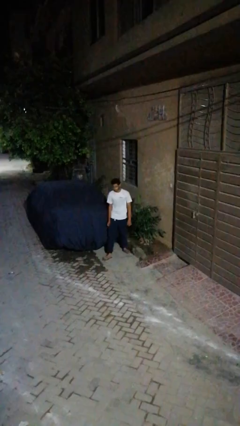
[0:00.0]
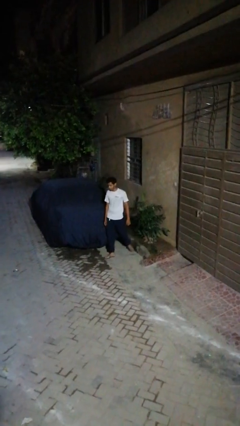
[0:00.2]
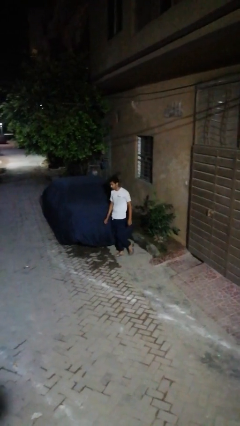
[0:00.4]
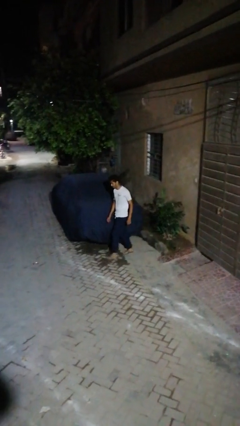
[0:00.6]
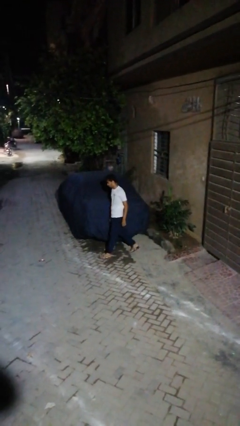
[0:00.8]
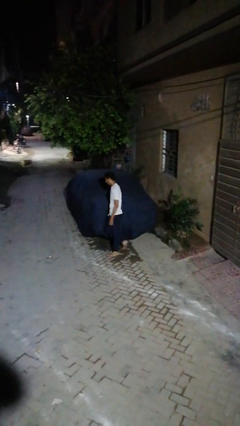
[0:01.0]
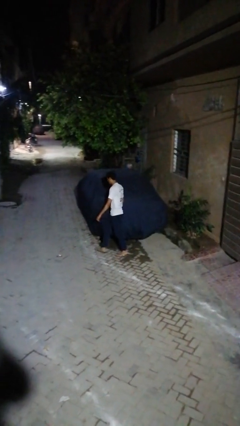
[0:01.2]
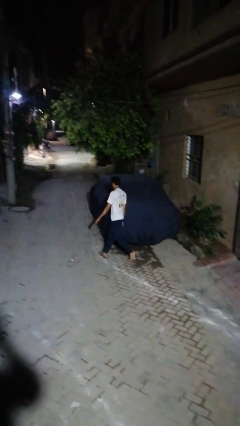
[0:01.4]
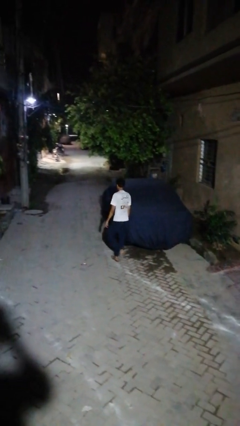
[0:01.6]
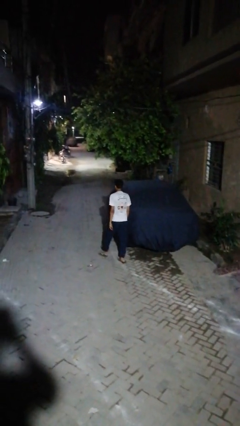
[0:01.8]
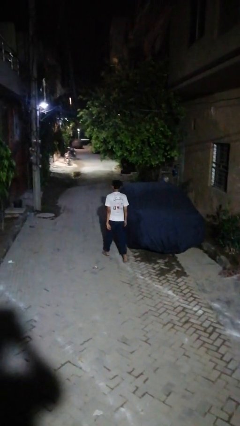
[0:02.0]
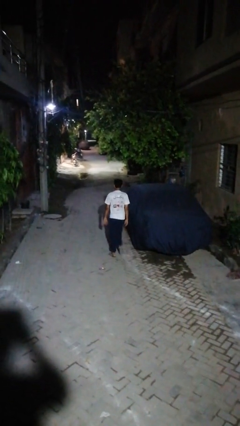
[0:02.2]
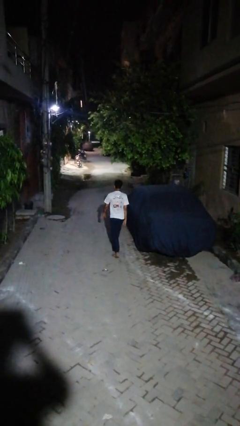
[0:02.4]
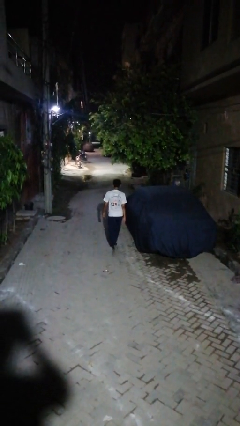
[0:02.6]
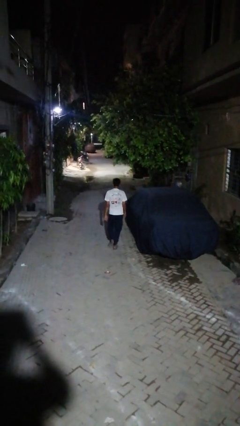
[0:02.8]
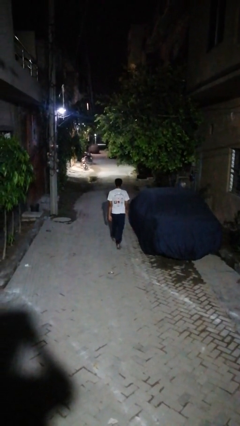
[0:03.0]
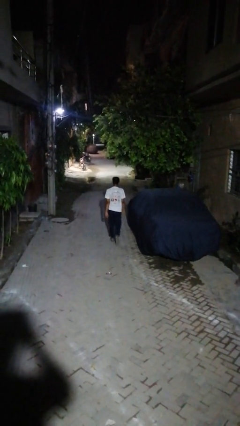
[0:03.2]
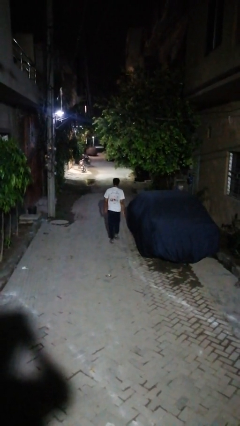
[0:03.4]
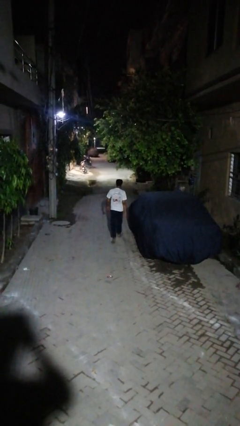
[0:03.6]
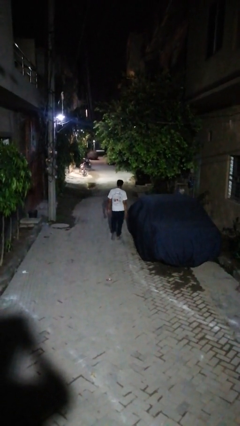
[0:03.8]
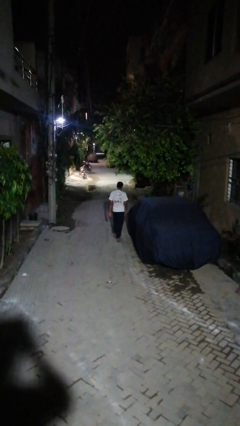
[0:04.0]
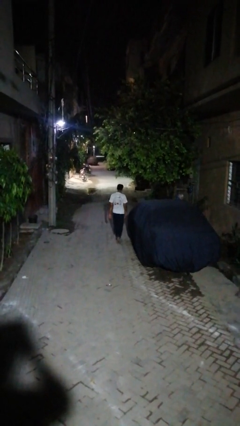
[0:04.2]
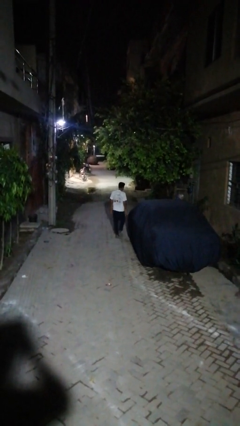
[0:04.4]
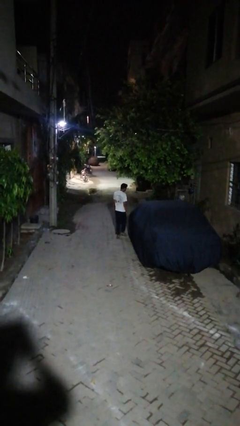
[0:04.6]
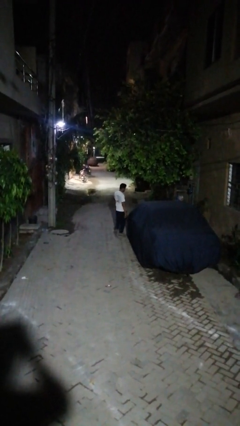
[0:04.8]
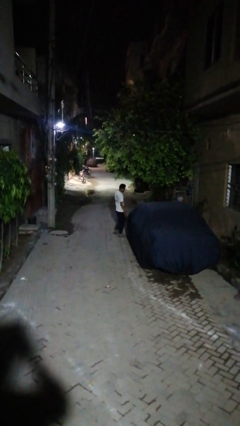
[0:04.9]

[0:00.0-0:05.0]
person walks around car

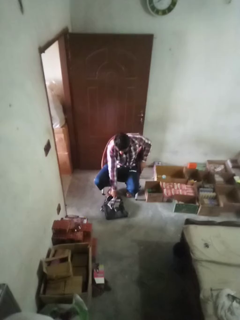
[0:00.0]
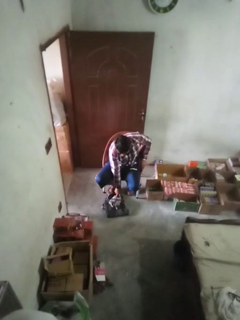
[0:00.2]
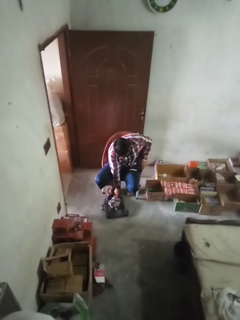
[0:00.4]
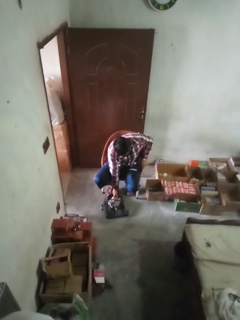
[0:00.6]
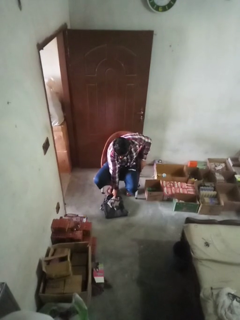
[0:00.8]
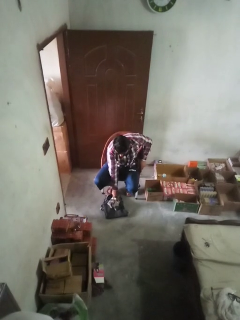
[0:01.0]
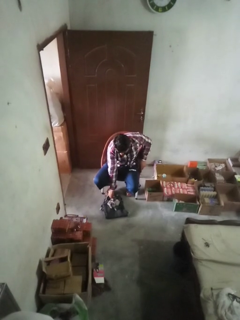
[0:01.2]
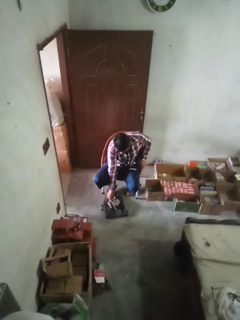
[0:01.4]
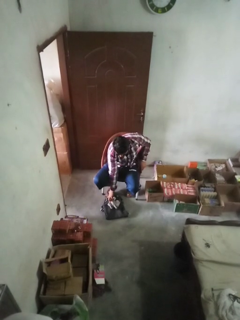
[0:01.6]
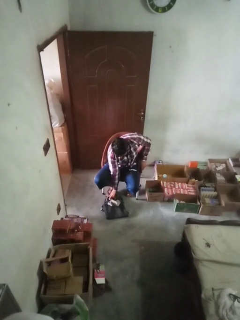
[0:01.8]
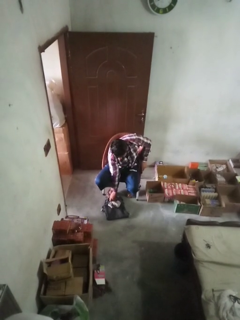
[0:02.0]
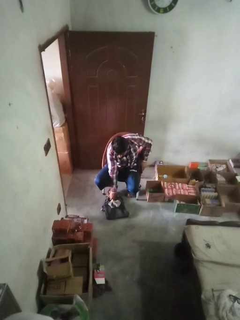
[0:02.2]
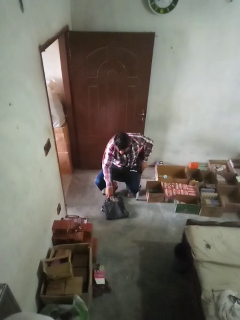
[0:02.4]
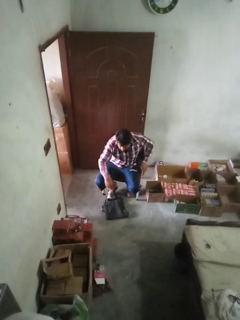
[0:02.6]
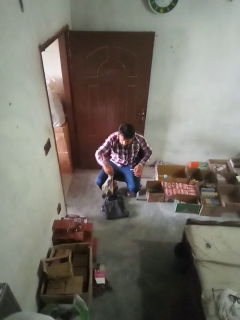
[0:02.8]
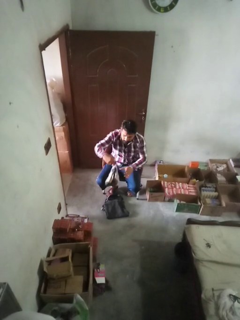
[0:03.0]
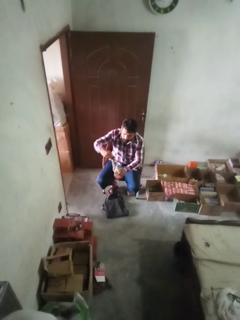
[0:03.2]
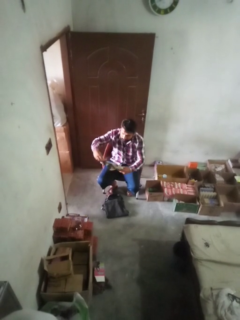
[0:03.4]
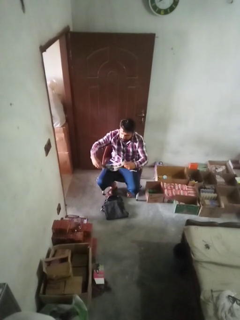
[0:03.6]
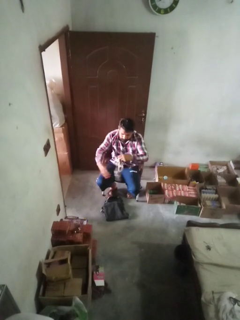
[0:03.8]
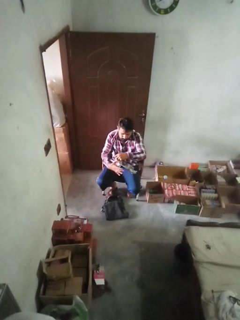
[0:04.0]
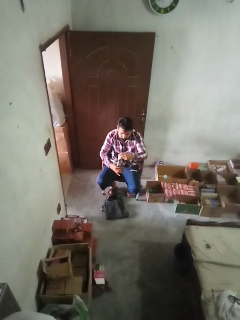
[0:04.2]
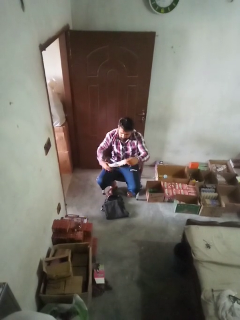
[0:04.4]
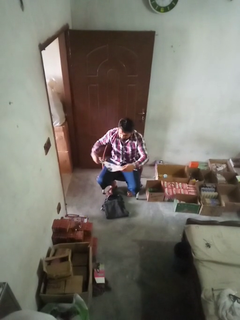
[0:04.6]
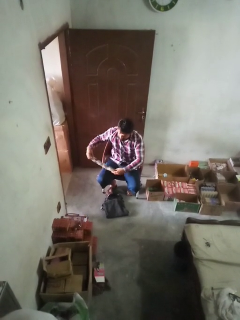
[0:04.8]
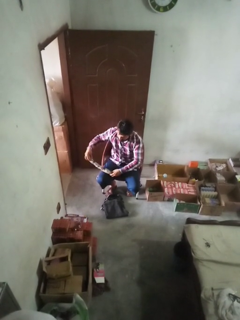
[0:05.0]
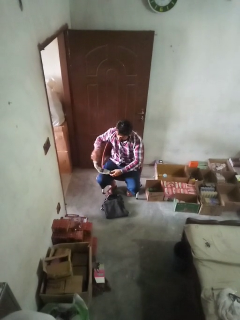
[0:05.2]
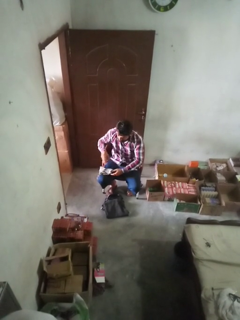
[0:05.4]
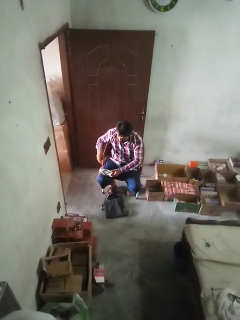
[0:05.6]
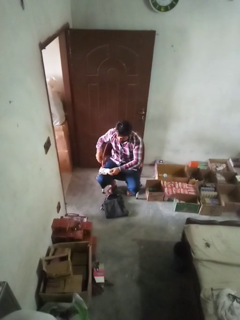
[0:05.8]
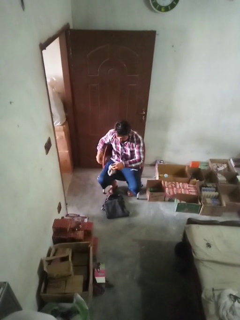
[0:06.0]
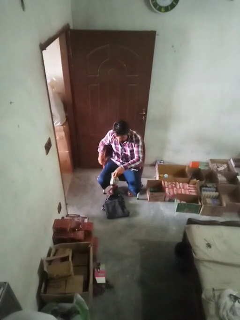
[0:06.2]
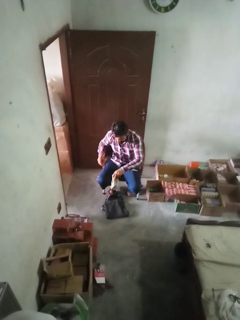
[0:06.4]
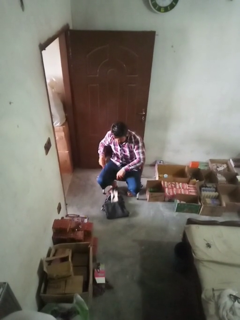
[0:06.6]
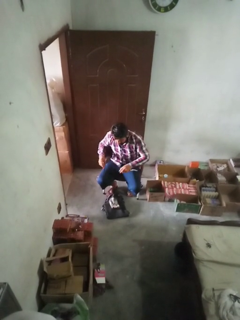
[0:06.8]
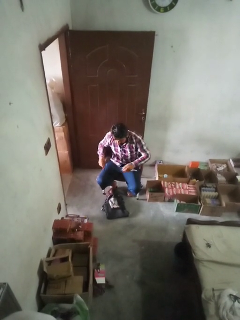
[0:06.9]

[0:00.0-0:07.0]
person folds socks

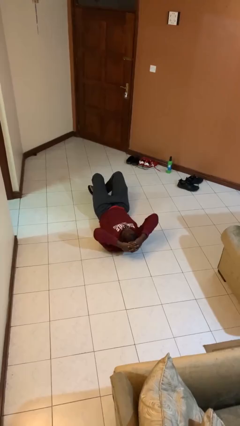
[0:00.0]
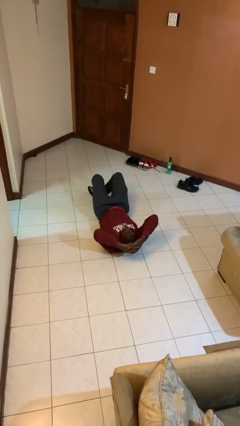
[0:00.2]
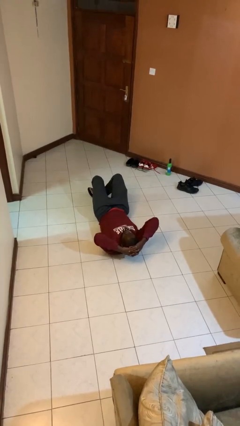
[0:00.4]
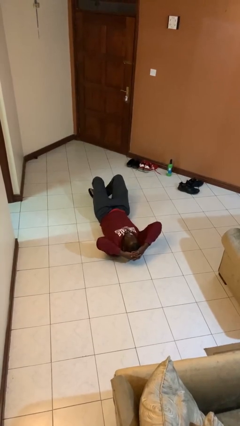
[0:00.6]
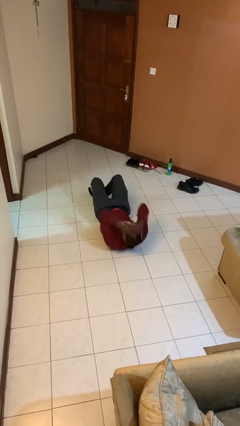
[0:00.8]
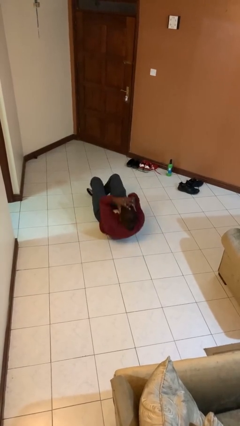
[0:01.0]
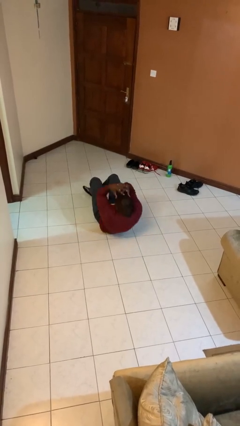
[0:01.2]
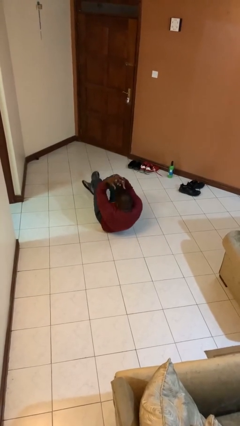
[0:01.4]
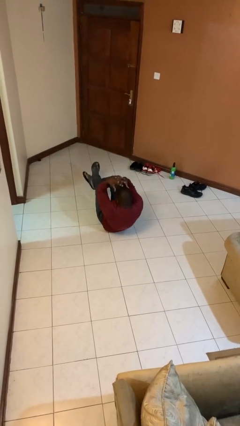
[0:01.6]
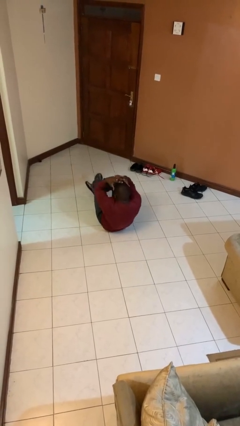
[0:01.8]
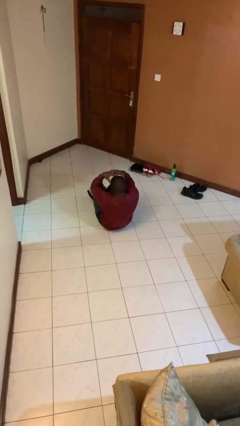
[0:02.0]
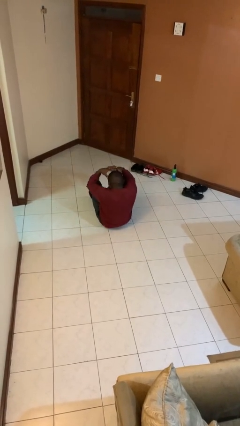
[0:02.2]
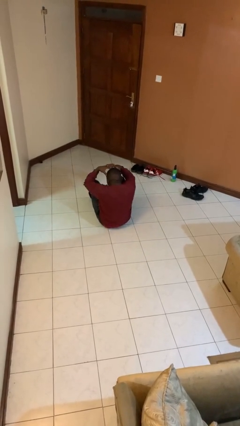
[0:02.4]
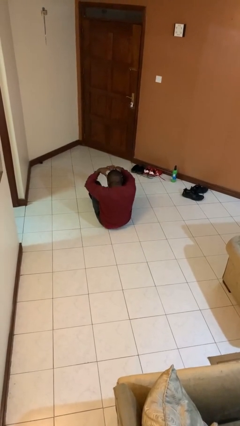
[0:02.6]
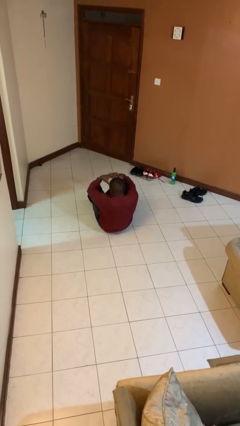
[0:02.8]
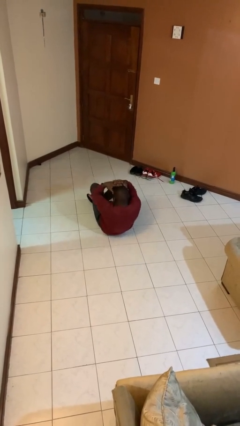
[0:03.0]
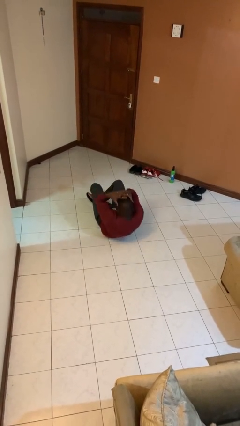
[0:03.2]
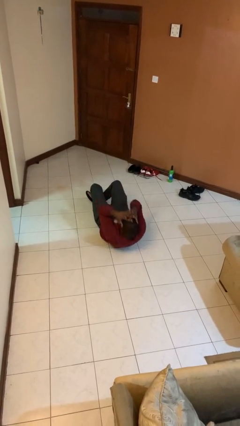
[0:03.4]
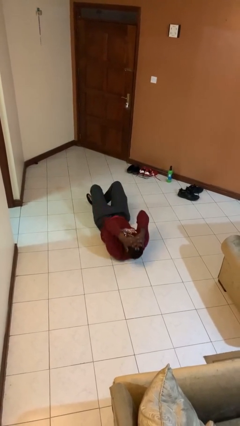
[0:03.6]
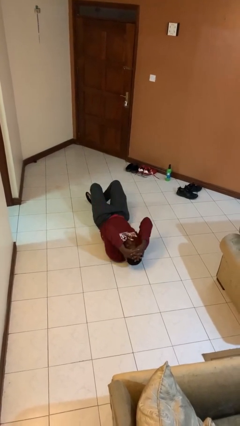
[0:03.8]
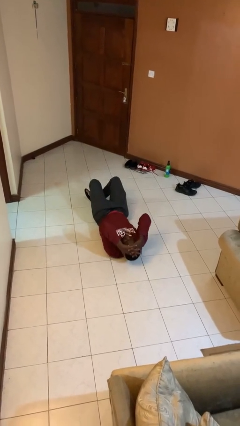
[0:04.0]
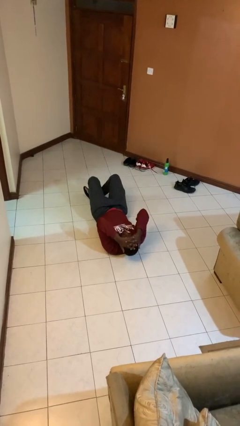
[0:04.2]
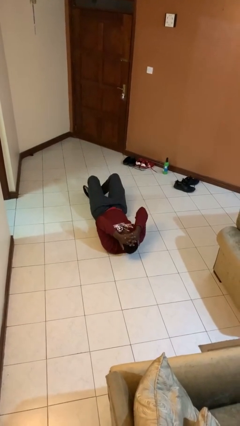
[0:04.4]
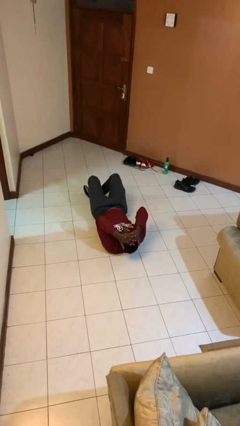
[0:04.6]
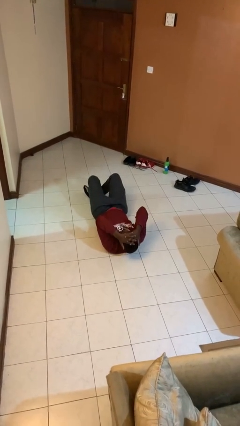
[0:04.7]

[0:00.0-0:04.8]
person exercises with situp

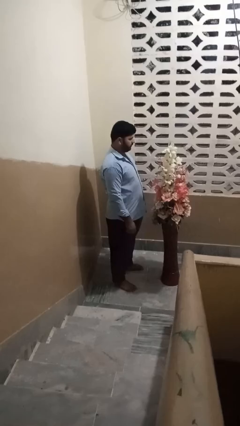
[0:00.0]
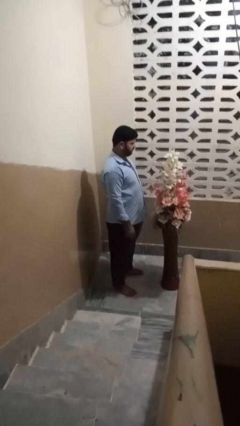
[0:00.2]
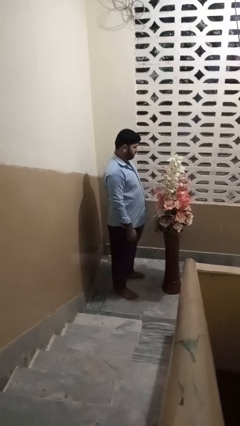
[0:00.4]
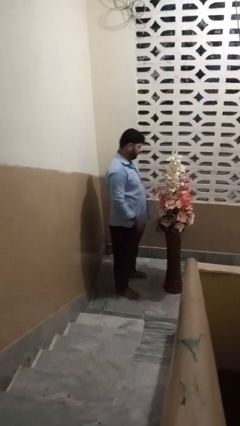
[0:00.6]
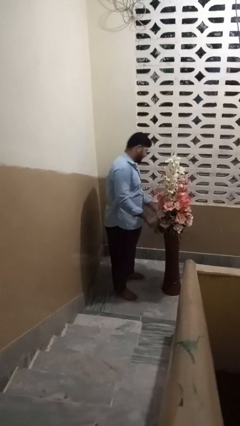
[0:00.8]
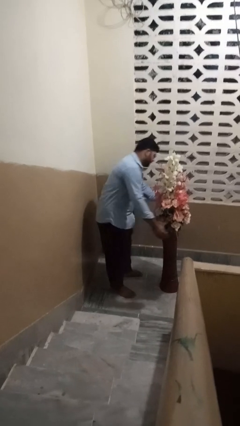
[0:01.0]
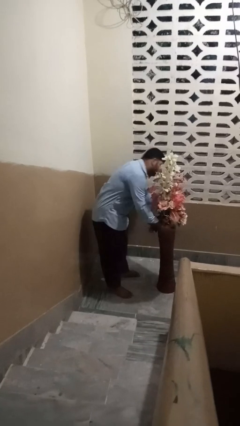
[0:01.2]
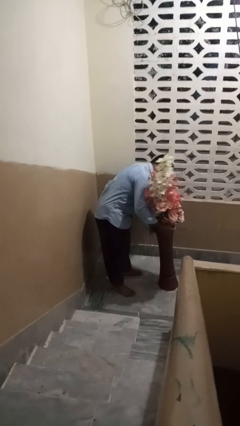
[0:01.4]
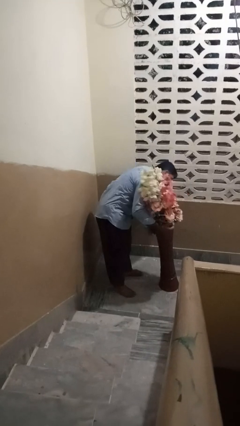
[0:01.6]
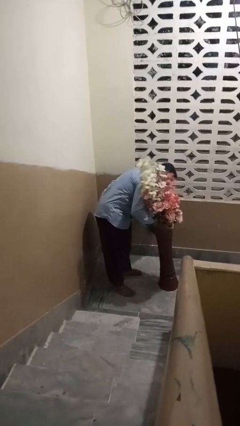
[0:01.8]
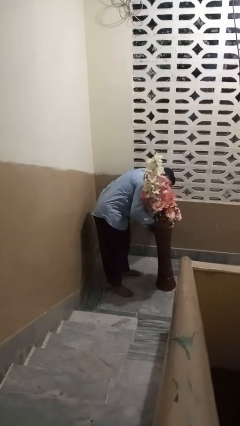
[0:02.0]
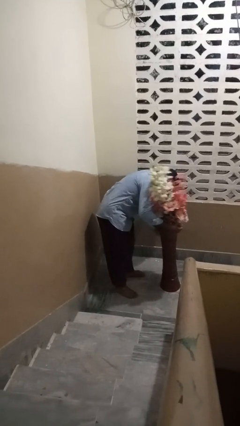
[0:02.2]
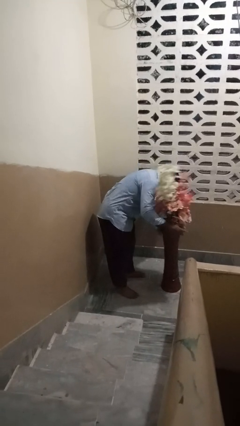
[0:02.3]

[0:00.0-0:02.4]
person arranges flowers in vase
